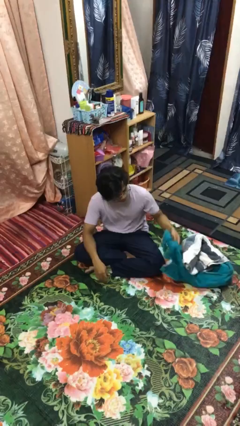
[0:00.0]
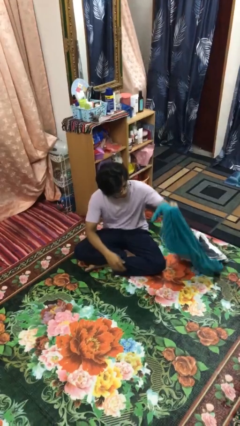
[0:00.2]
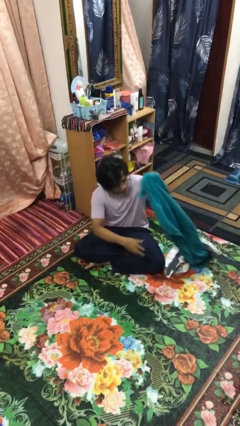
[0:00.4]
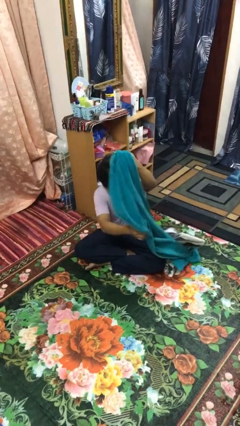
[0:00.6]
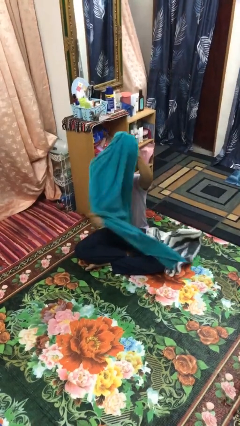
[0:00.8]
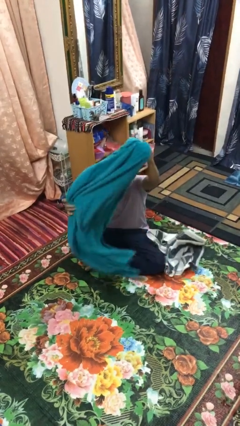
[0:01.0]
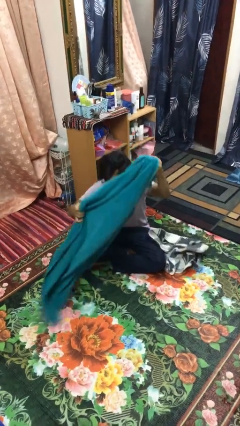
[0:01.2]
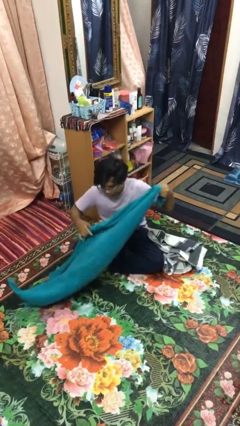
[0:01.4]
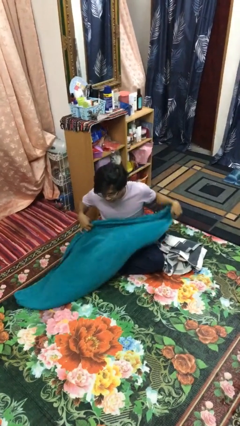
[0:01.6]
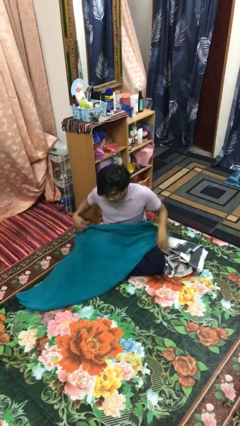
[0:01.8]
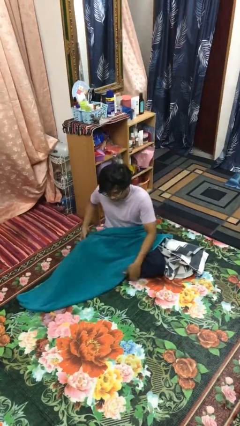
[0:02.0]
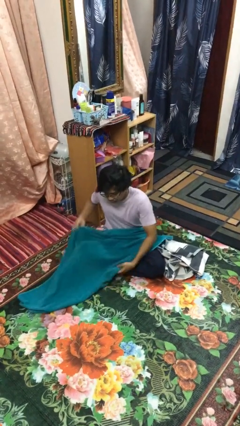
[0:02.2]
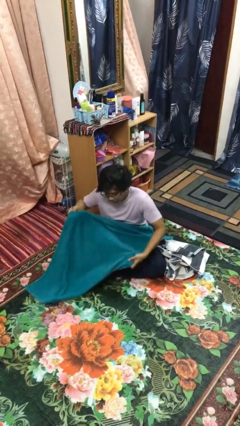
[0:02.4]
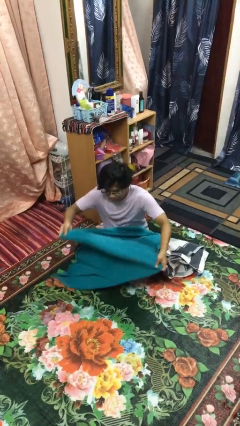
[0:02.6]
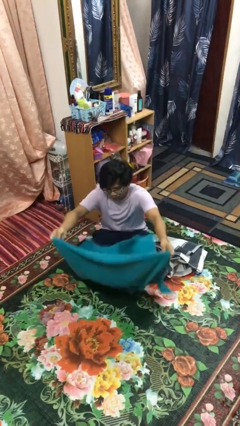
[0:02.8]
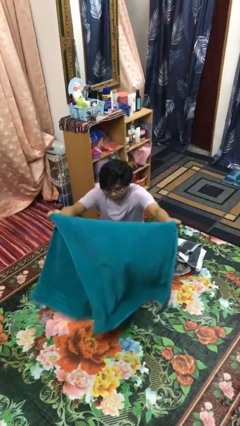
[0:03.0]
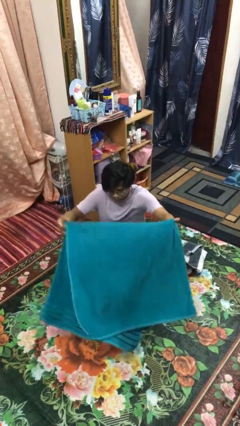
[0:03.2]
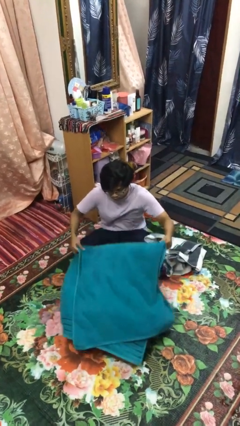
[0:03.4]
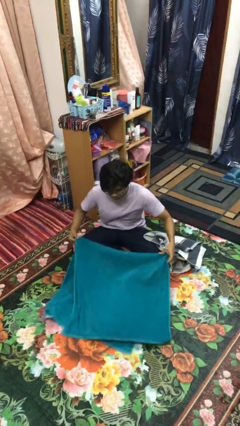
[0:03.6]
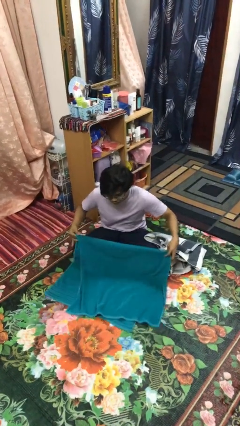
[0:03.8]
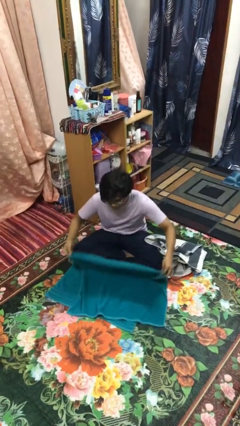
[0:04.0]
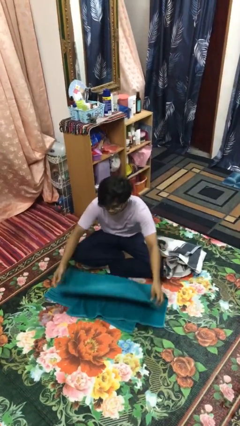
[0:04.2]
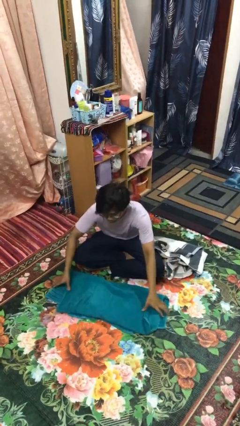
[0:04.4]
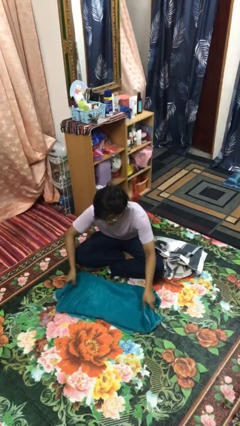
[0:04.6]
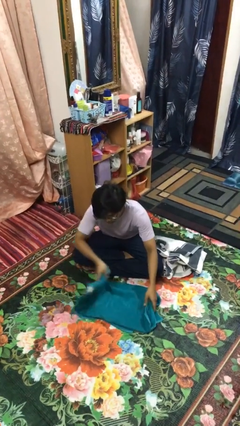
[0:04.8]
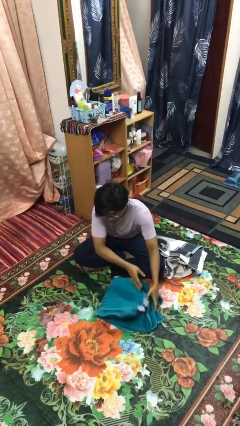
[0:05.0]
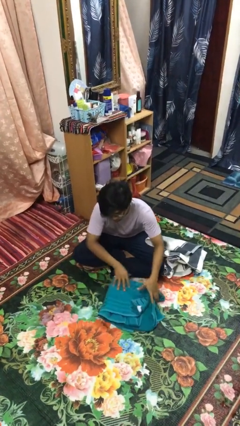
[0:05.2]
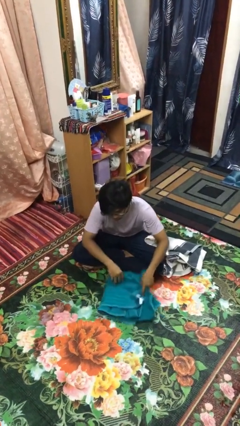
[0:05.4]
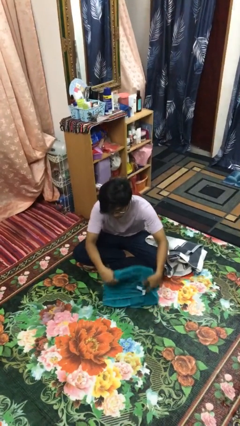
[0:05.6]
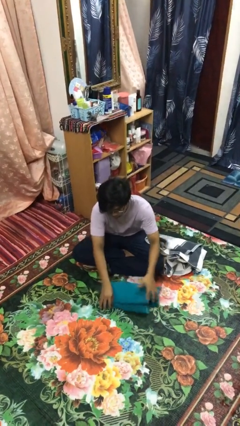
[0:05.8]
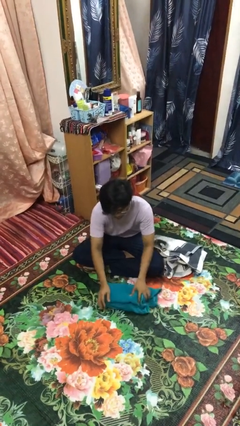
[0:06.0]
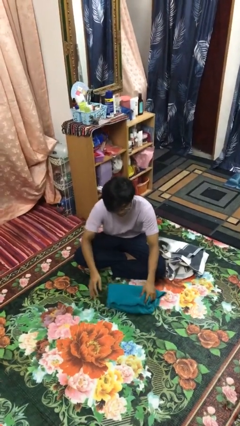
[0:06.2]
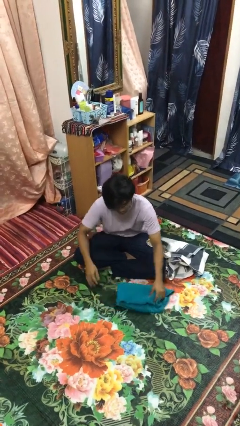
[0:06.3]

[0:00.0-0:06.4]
person folds towel

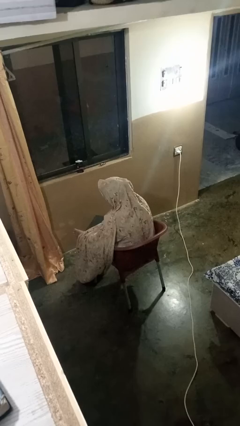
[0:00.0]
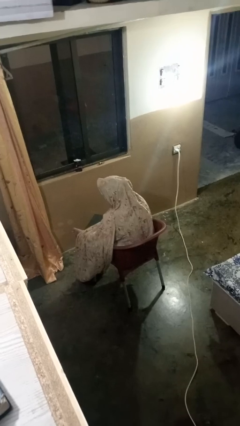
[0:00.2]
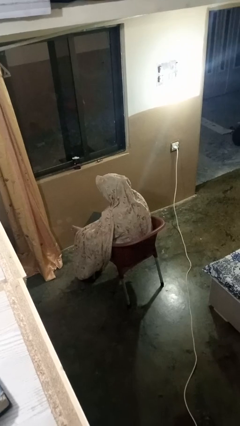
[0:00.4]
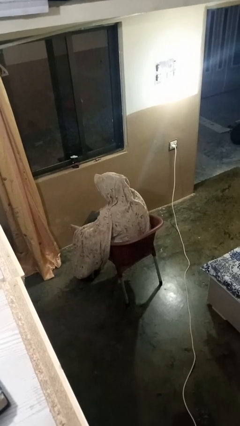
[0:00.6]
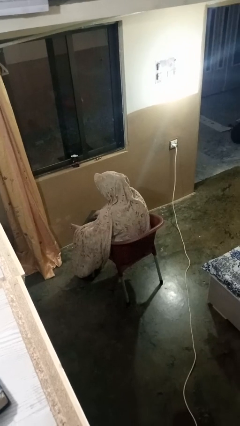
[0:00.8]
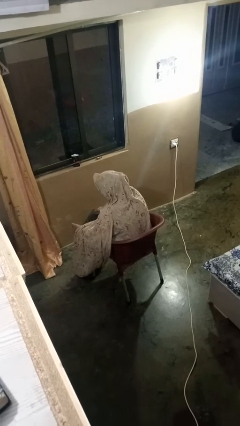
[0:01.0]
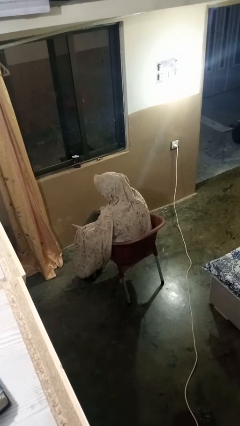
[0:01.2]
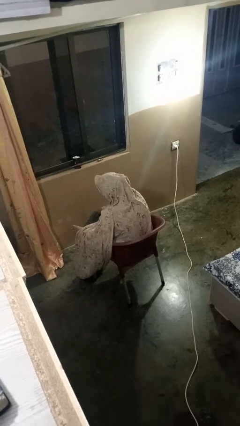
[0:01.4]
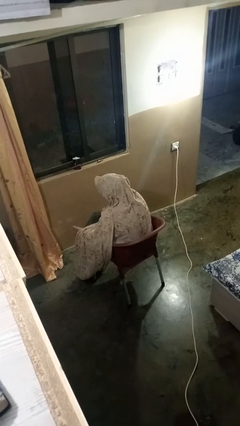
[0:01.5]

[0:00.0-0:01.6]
person interacts with tablet

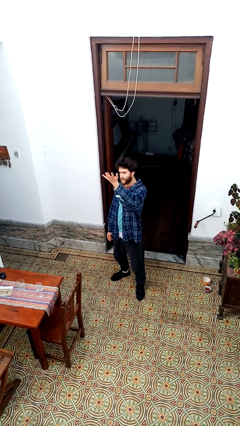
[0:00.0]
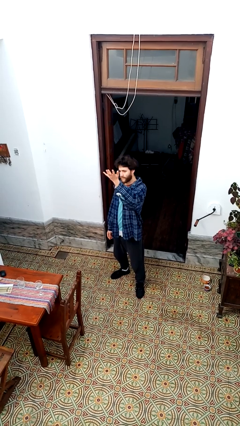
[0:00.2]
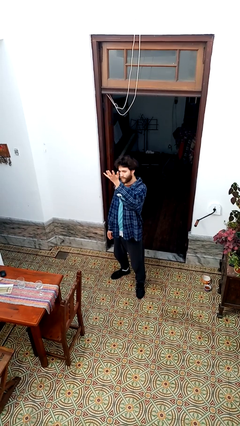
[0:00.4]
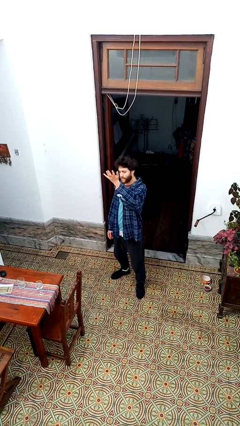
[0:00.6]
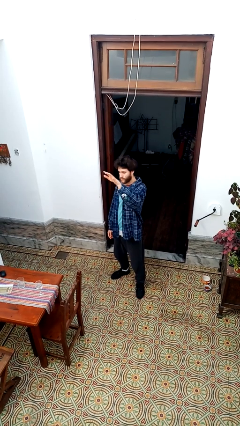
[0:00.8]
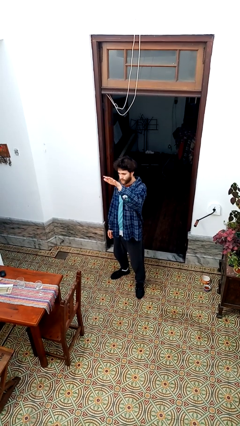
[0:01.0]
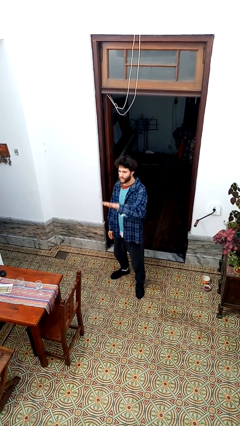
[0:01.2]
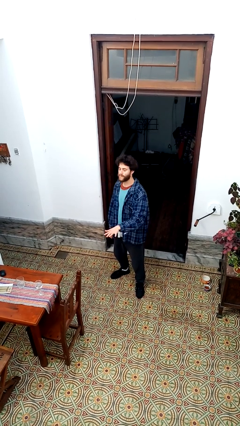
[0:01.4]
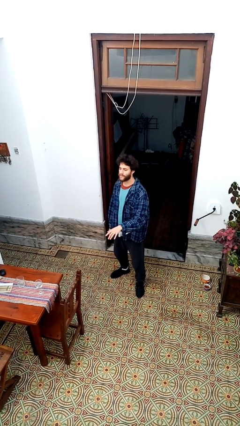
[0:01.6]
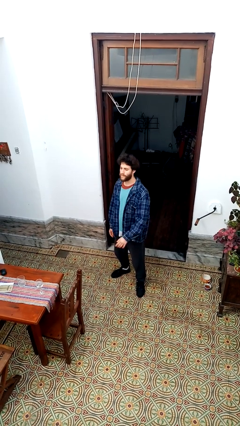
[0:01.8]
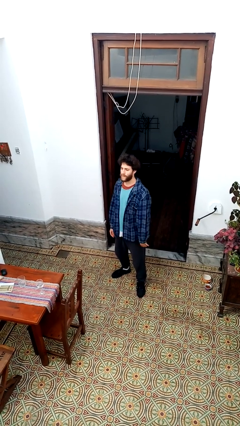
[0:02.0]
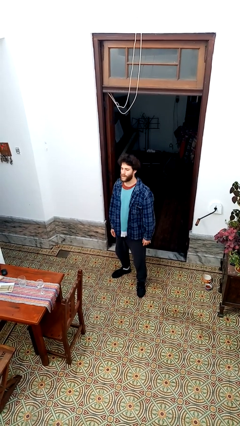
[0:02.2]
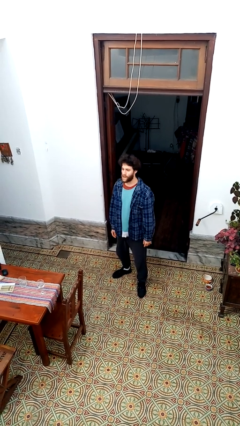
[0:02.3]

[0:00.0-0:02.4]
person gestures swipe down

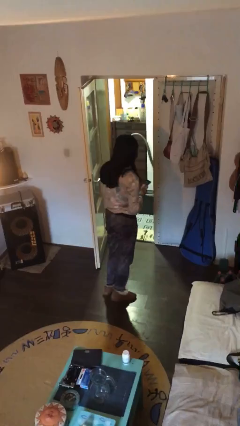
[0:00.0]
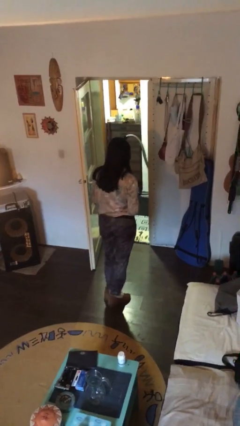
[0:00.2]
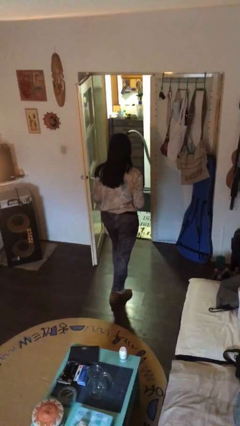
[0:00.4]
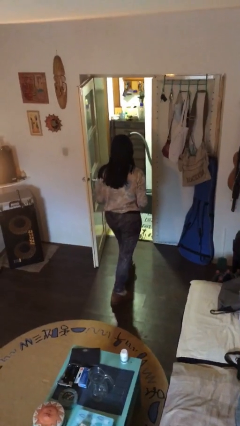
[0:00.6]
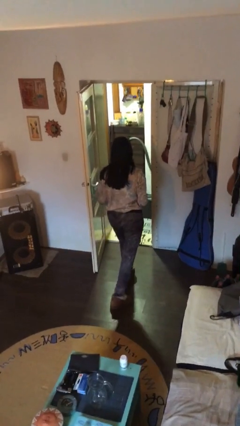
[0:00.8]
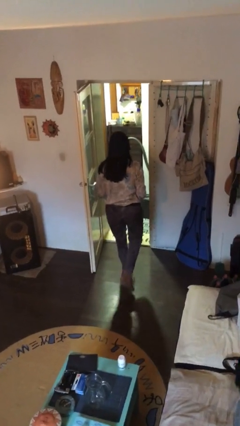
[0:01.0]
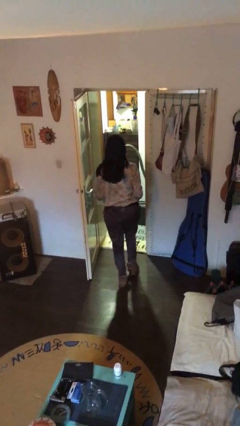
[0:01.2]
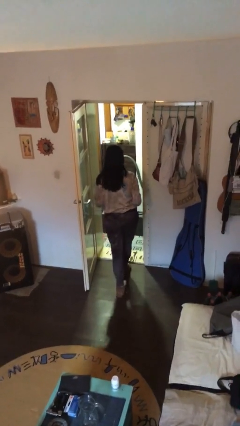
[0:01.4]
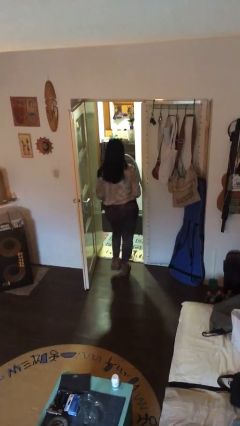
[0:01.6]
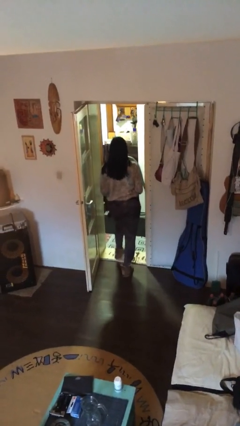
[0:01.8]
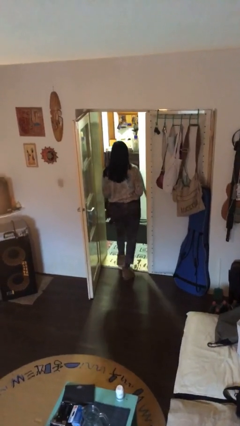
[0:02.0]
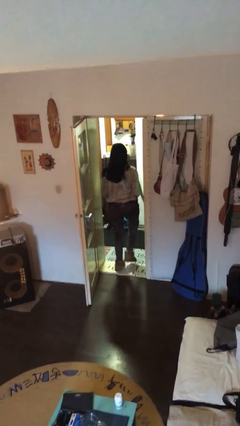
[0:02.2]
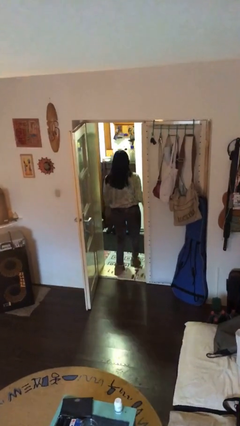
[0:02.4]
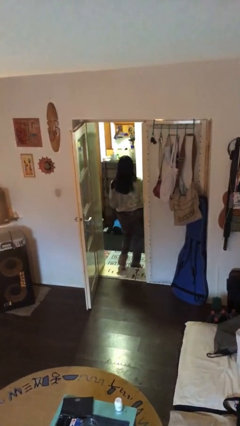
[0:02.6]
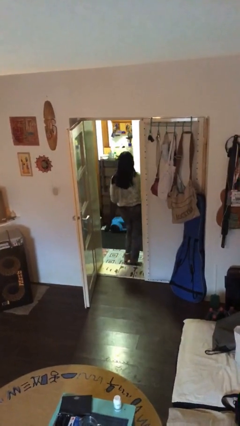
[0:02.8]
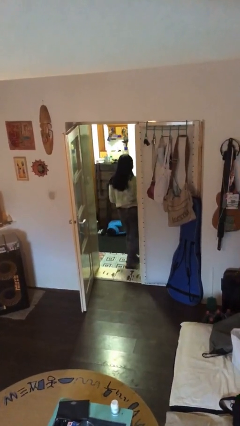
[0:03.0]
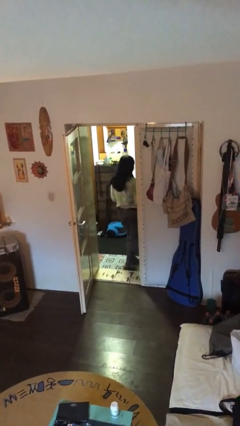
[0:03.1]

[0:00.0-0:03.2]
person exits scene through structure

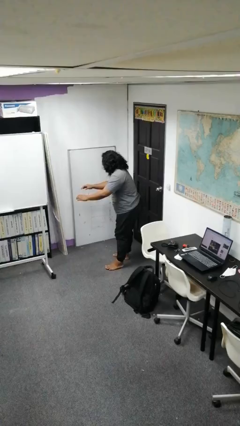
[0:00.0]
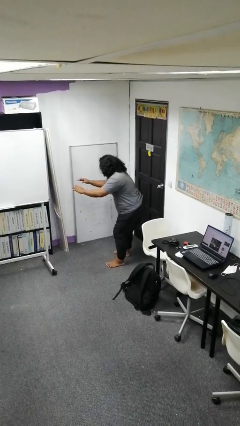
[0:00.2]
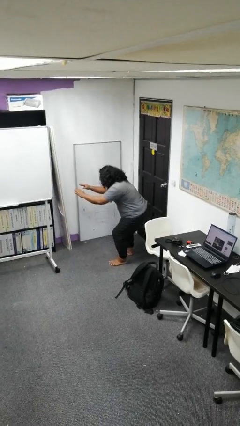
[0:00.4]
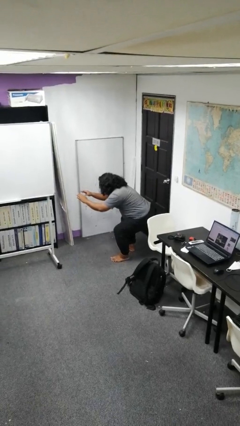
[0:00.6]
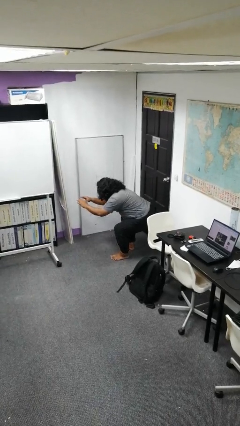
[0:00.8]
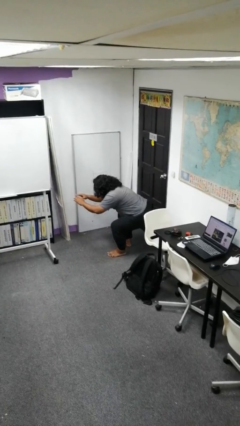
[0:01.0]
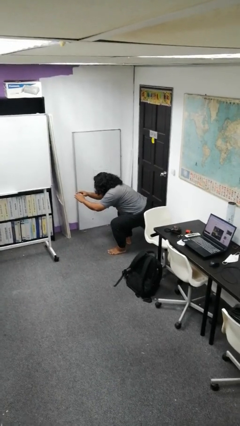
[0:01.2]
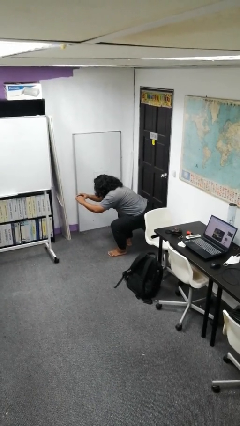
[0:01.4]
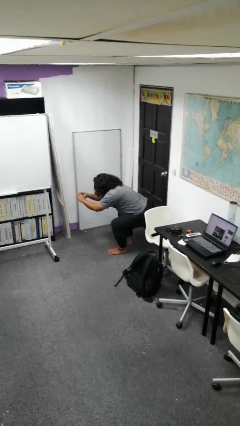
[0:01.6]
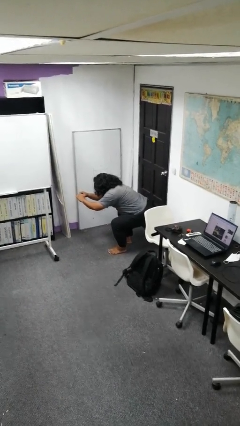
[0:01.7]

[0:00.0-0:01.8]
person squats

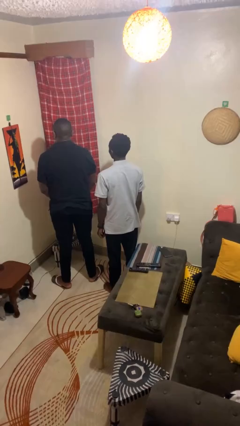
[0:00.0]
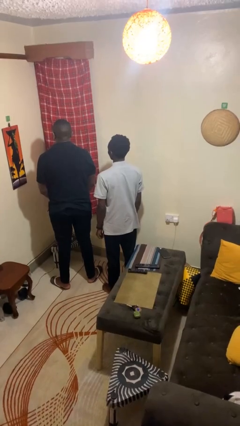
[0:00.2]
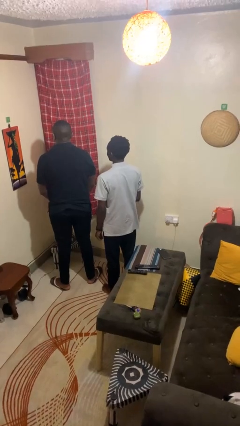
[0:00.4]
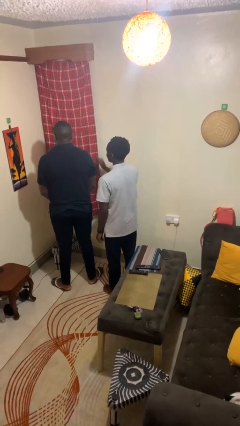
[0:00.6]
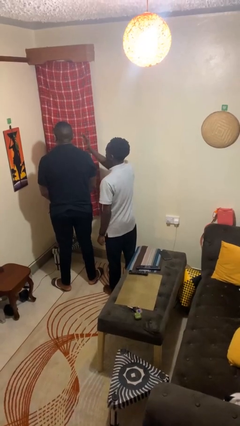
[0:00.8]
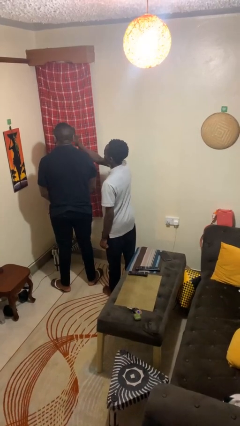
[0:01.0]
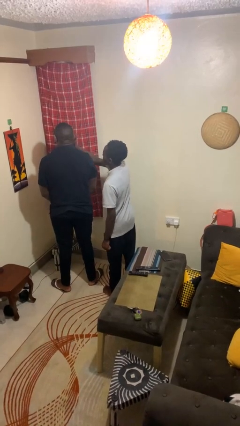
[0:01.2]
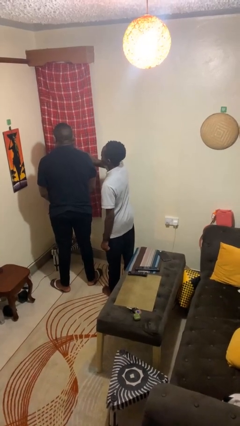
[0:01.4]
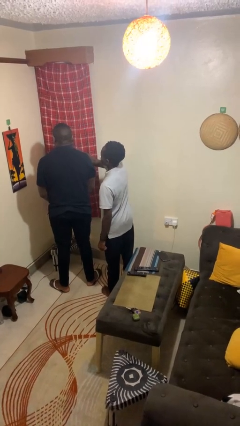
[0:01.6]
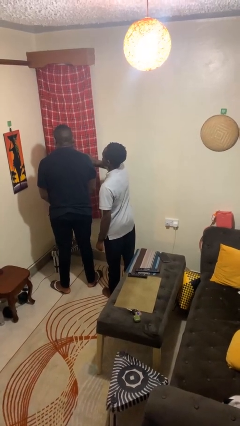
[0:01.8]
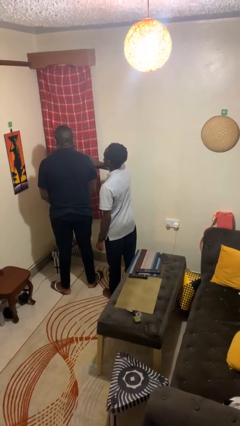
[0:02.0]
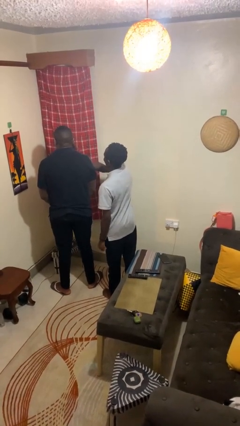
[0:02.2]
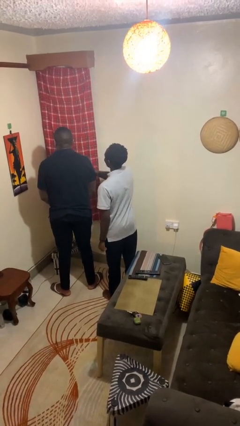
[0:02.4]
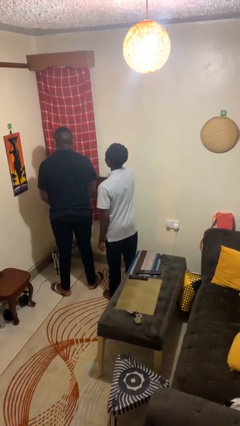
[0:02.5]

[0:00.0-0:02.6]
person touches face of person
